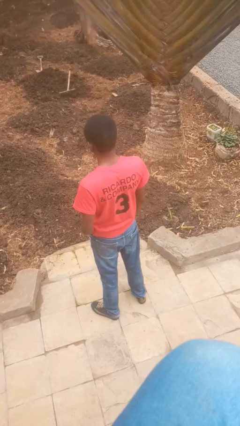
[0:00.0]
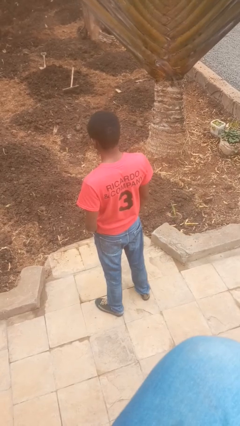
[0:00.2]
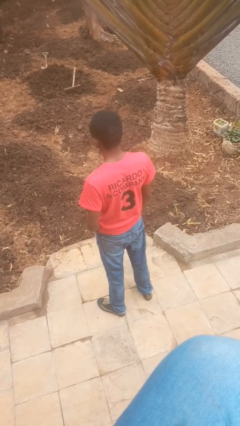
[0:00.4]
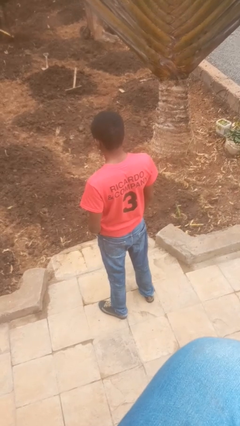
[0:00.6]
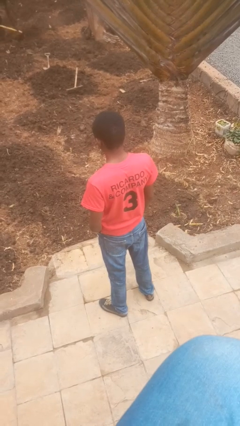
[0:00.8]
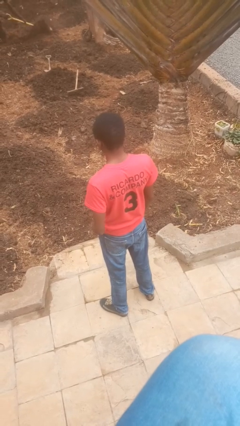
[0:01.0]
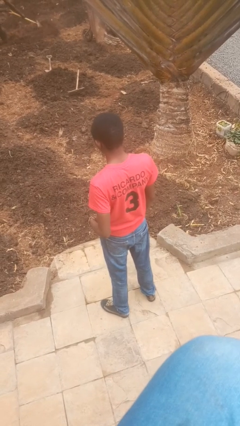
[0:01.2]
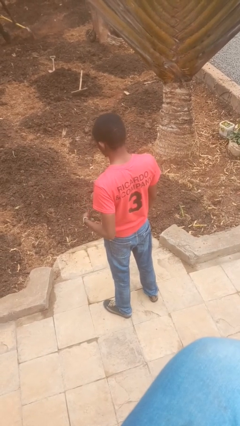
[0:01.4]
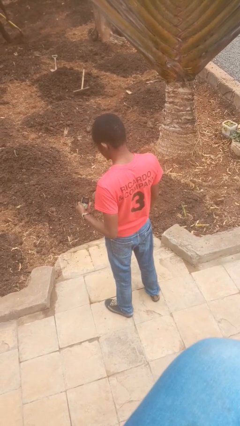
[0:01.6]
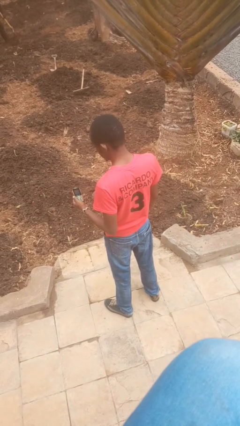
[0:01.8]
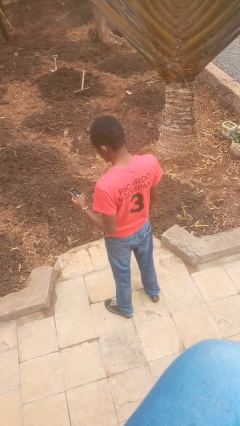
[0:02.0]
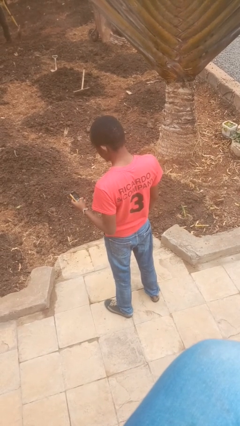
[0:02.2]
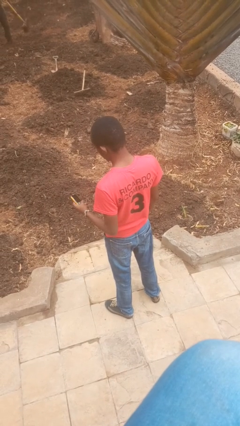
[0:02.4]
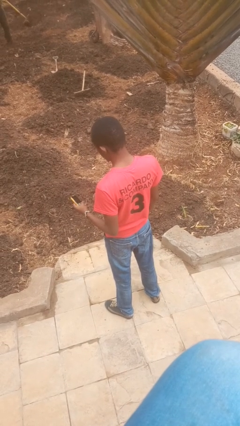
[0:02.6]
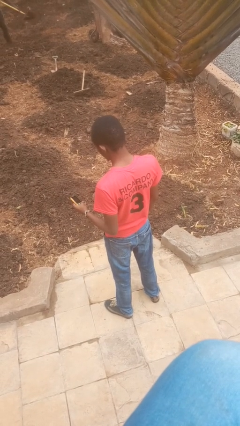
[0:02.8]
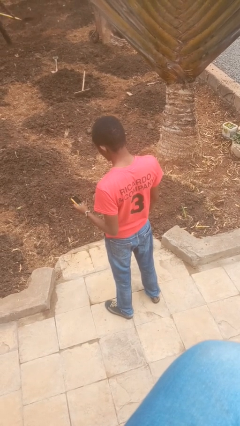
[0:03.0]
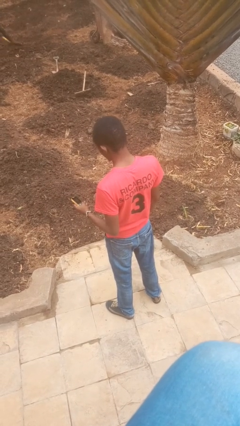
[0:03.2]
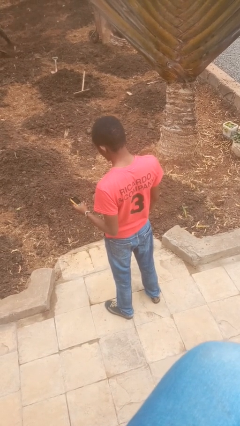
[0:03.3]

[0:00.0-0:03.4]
person takes phone from pocket

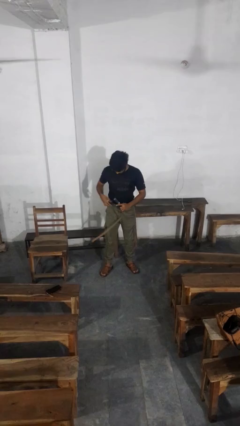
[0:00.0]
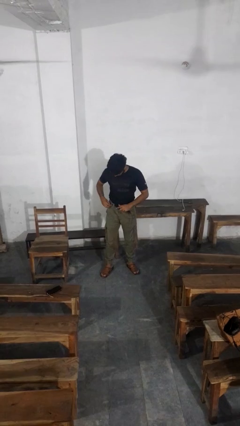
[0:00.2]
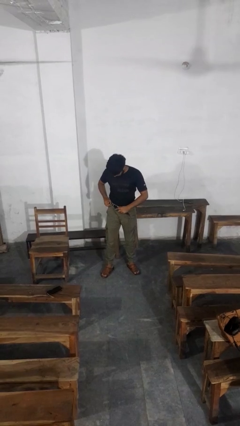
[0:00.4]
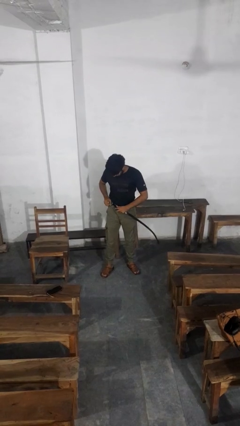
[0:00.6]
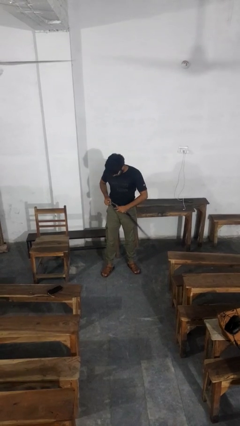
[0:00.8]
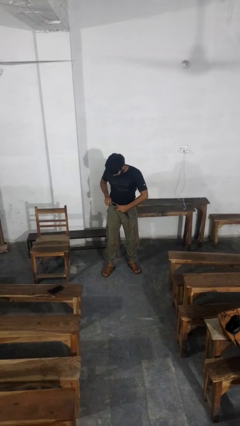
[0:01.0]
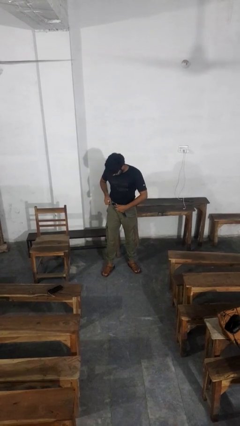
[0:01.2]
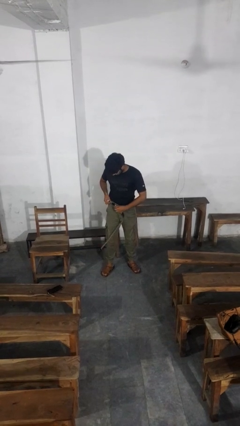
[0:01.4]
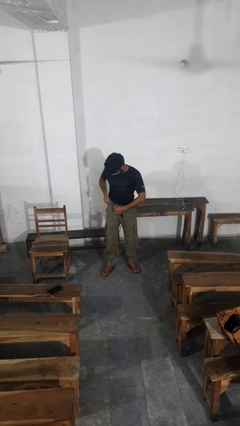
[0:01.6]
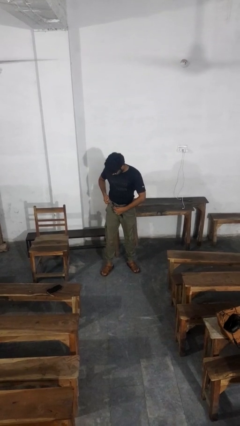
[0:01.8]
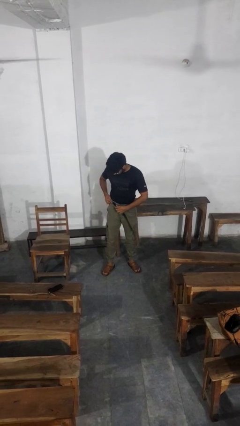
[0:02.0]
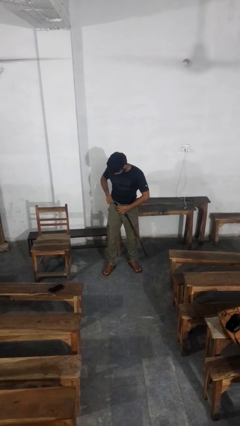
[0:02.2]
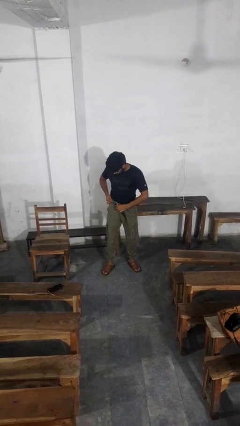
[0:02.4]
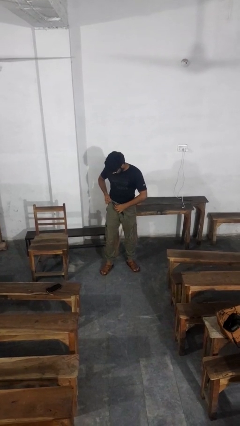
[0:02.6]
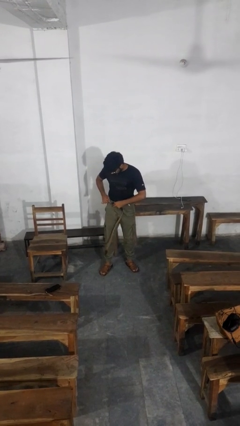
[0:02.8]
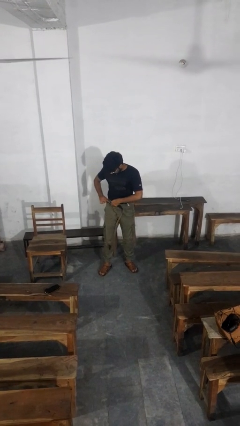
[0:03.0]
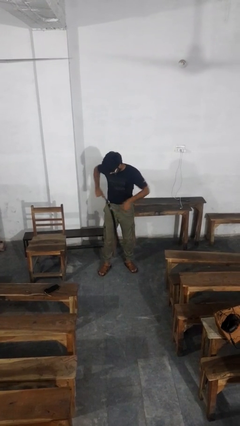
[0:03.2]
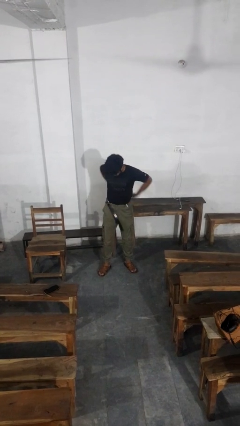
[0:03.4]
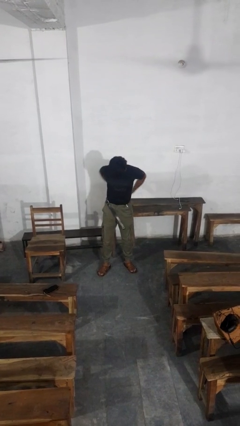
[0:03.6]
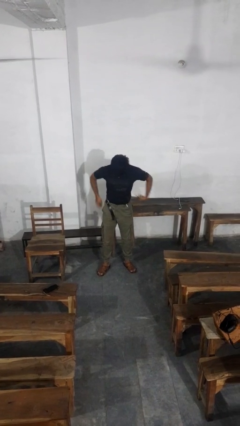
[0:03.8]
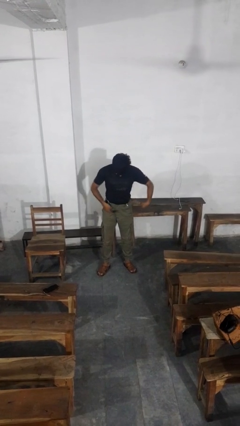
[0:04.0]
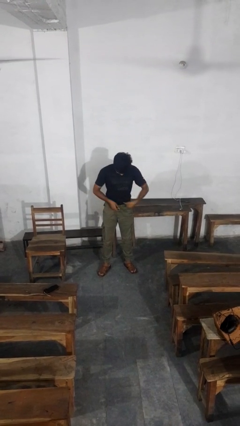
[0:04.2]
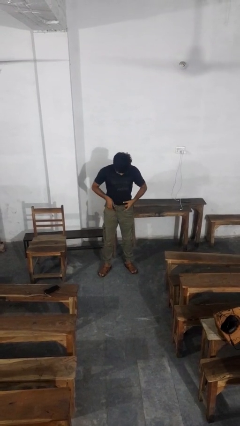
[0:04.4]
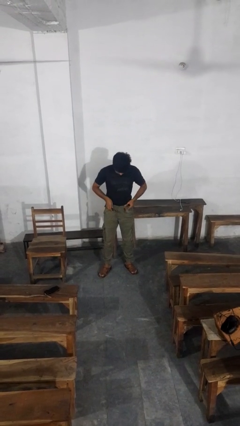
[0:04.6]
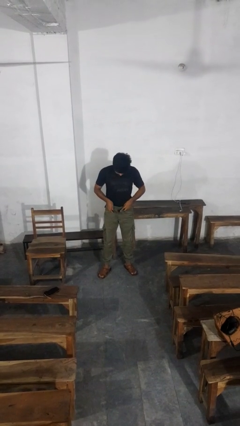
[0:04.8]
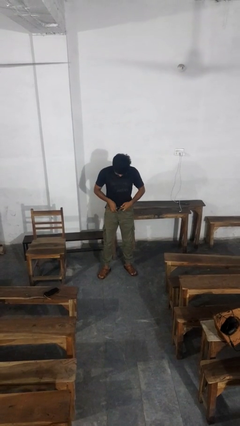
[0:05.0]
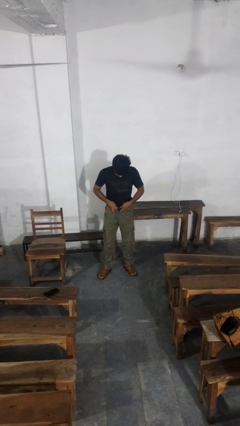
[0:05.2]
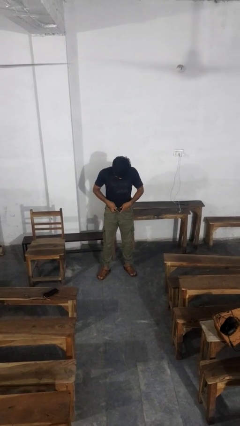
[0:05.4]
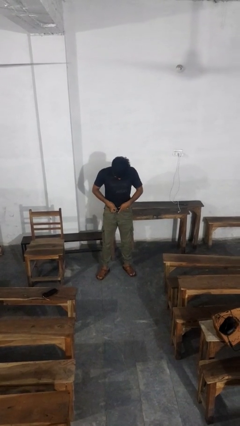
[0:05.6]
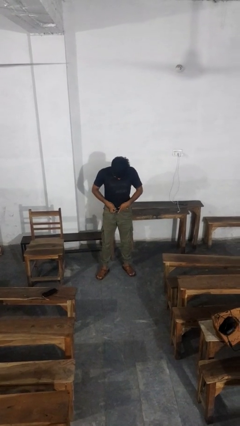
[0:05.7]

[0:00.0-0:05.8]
person puts on belt

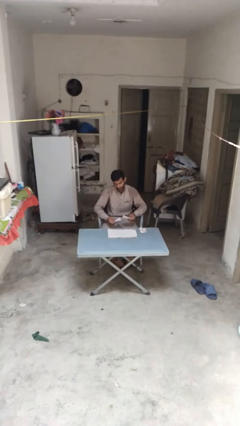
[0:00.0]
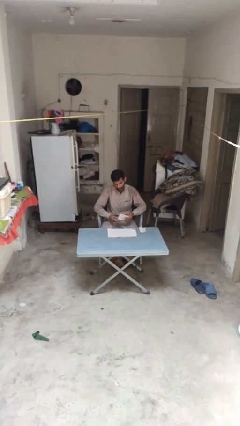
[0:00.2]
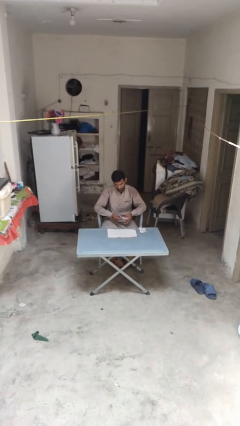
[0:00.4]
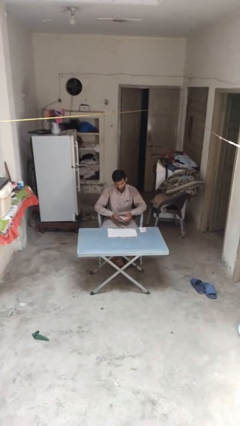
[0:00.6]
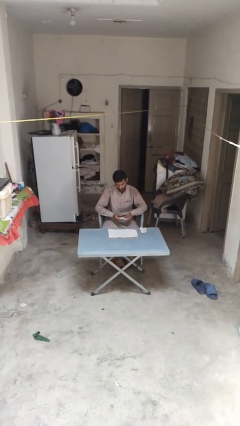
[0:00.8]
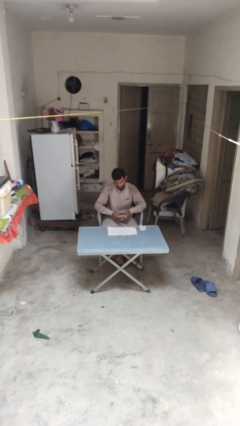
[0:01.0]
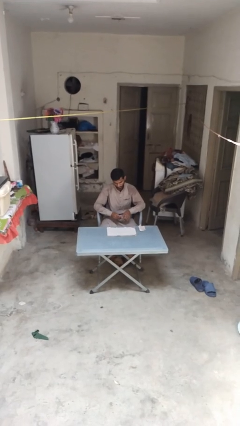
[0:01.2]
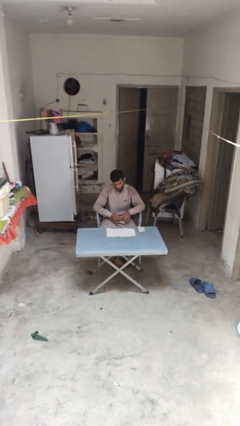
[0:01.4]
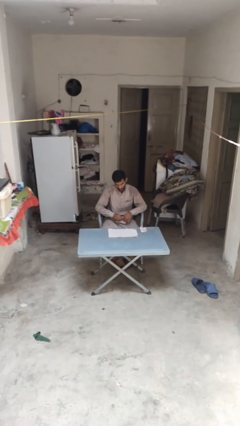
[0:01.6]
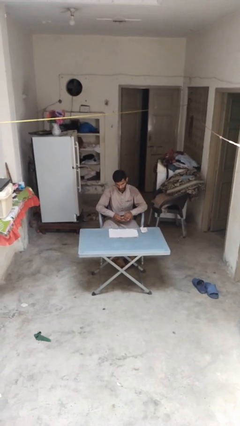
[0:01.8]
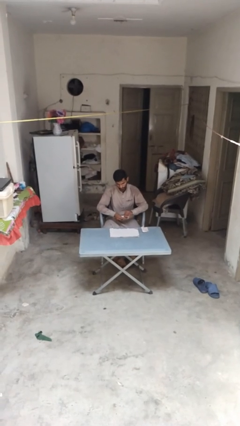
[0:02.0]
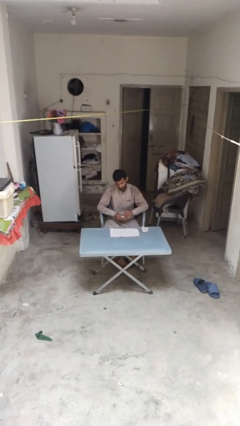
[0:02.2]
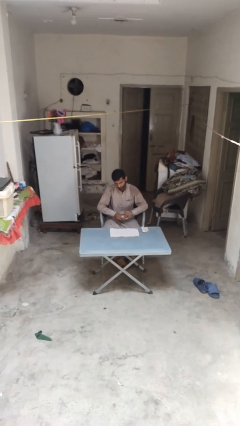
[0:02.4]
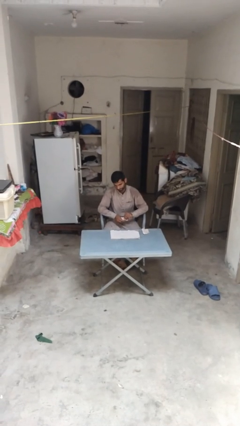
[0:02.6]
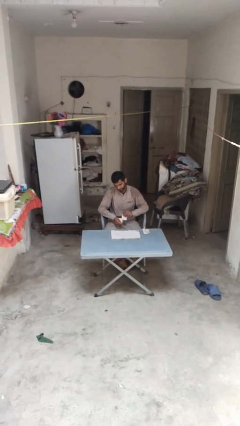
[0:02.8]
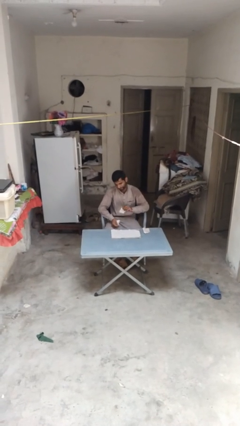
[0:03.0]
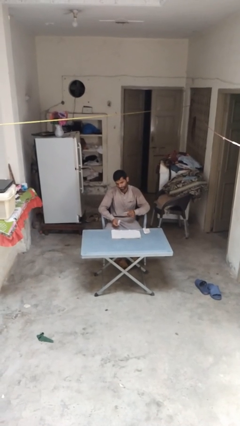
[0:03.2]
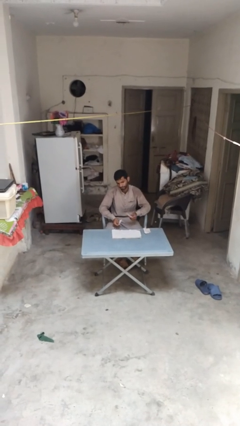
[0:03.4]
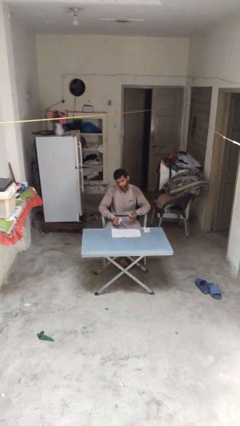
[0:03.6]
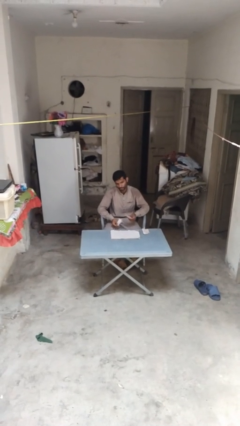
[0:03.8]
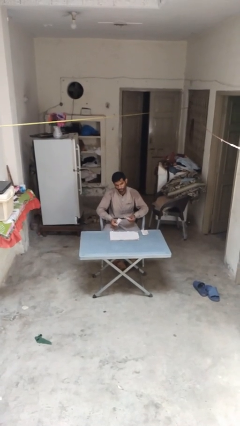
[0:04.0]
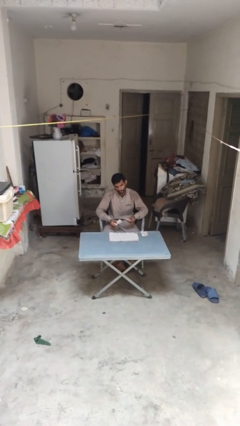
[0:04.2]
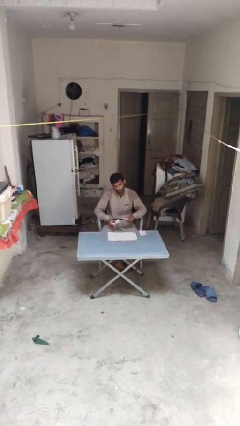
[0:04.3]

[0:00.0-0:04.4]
person tears paper

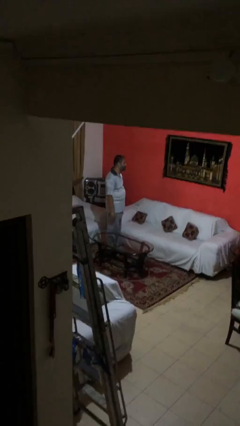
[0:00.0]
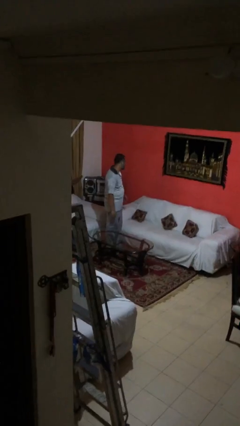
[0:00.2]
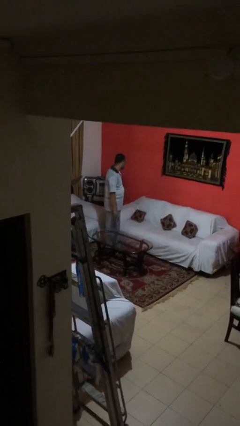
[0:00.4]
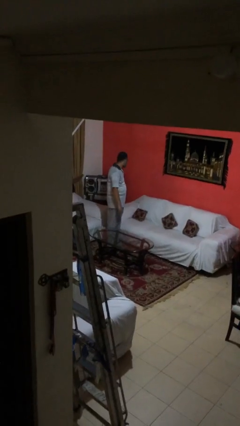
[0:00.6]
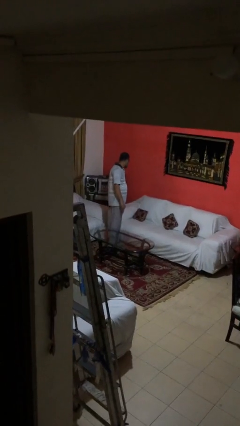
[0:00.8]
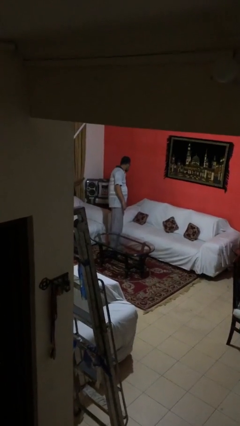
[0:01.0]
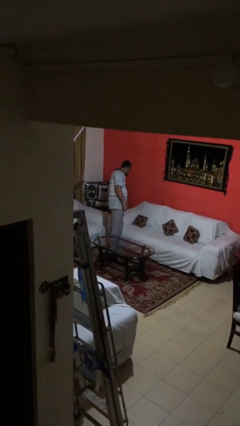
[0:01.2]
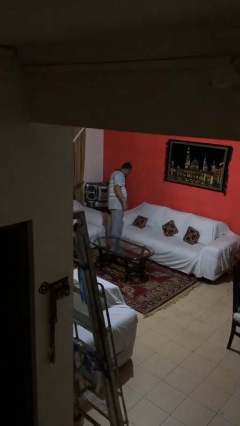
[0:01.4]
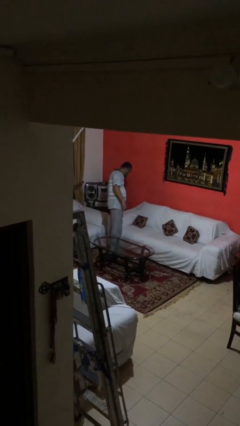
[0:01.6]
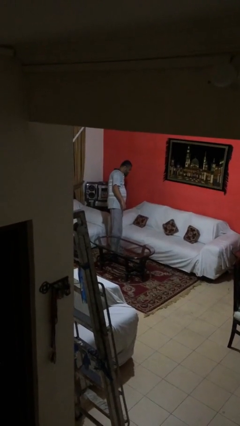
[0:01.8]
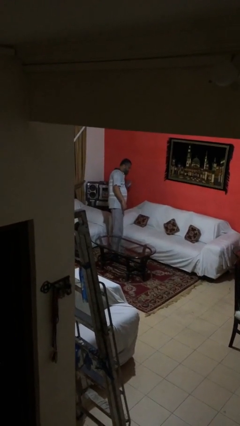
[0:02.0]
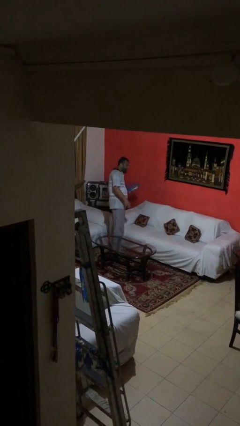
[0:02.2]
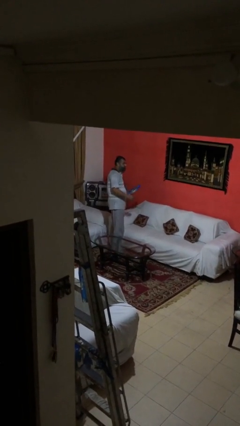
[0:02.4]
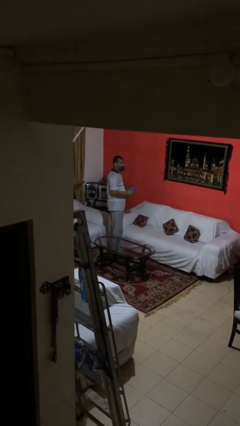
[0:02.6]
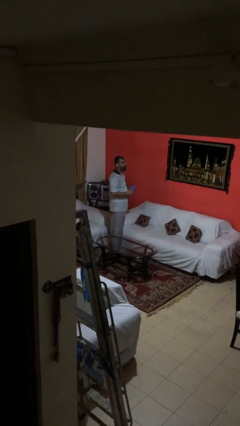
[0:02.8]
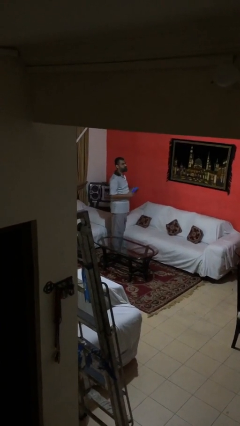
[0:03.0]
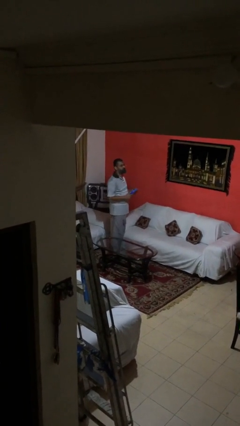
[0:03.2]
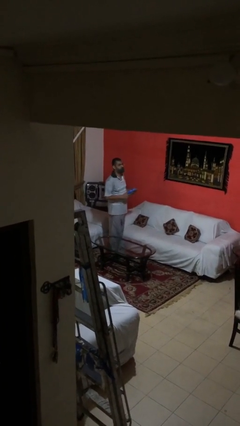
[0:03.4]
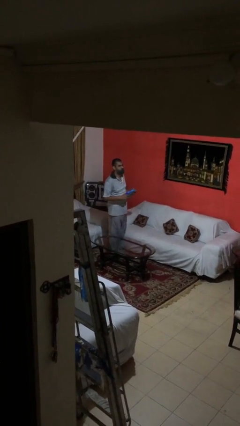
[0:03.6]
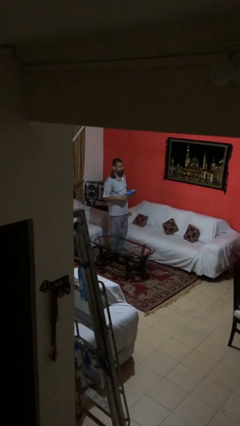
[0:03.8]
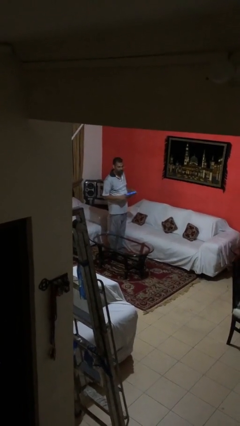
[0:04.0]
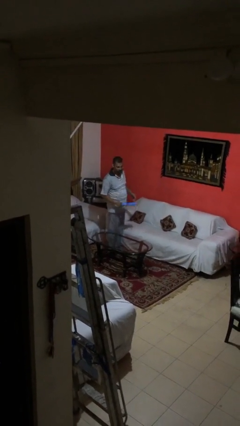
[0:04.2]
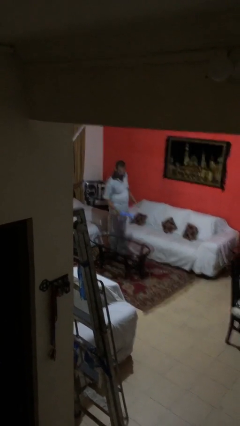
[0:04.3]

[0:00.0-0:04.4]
person picks up object from shelf
